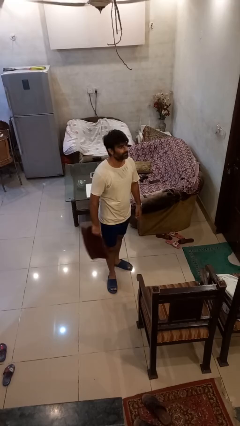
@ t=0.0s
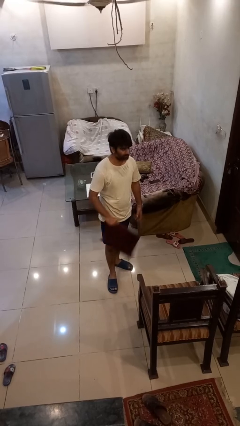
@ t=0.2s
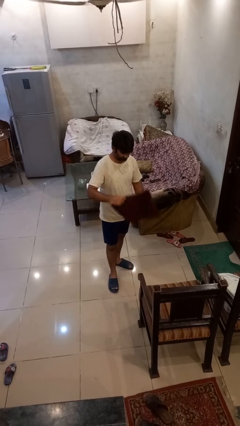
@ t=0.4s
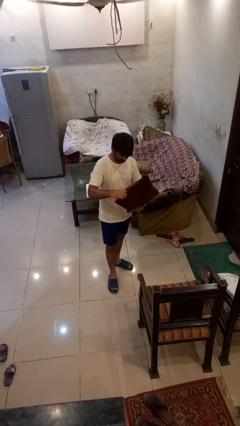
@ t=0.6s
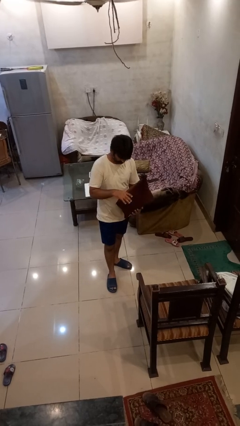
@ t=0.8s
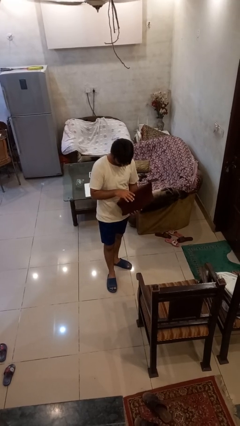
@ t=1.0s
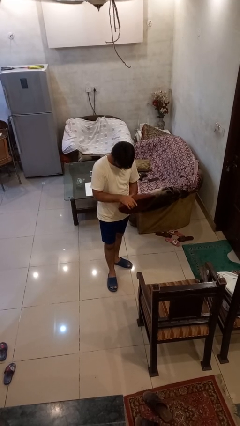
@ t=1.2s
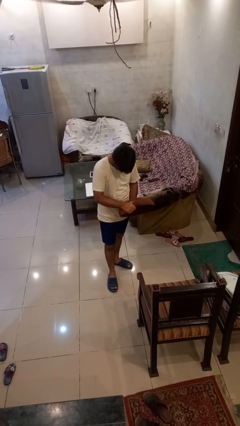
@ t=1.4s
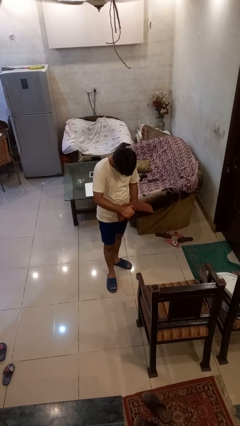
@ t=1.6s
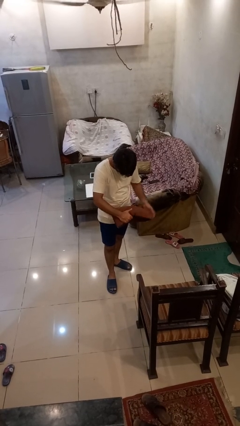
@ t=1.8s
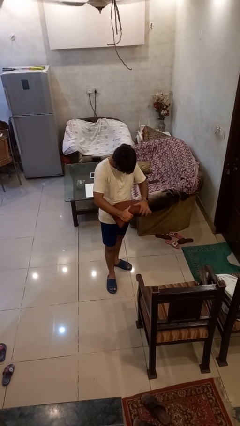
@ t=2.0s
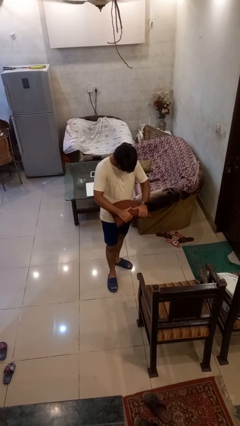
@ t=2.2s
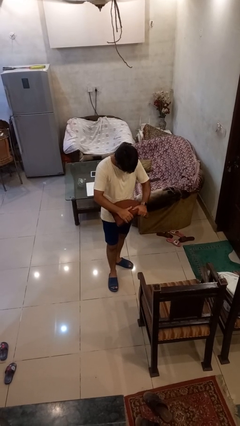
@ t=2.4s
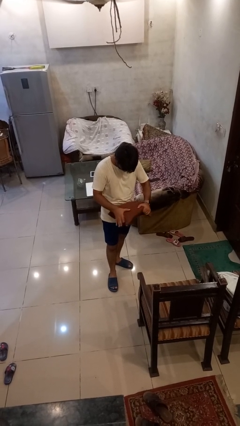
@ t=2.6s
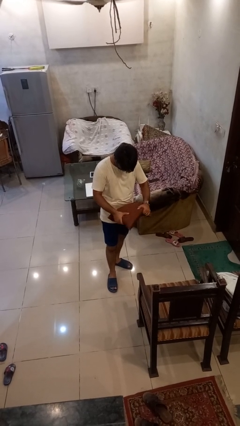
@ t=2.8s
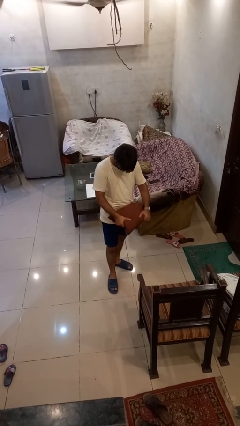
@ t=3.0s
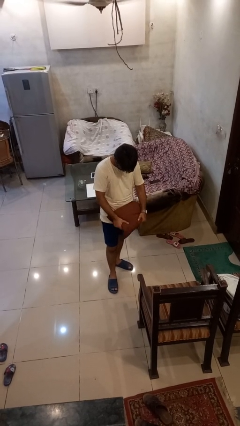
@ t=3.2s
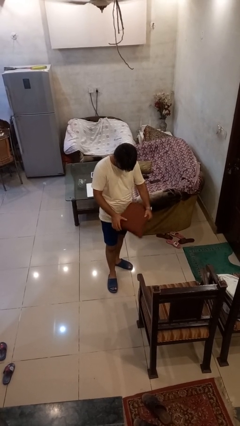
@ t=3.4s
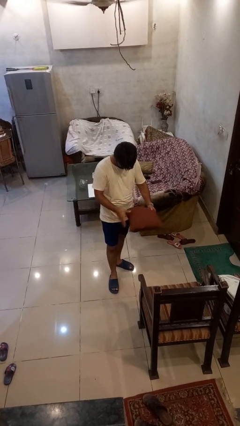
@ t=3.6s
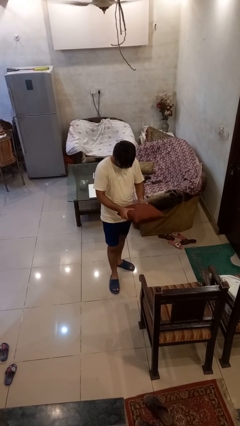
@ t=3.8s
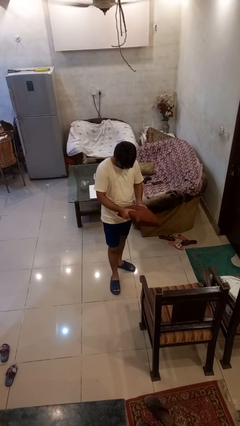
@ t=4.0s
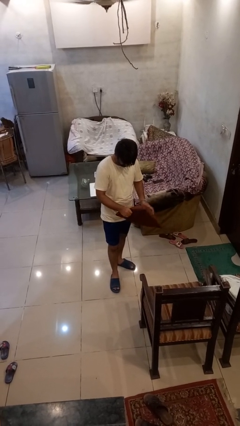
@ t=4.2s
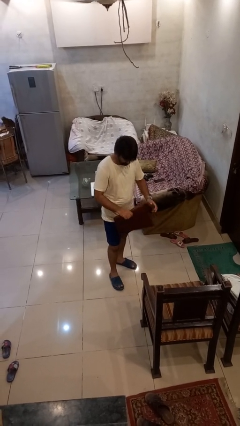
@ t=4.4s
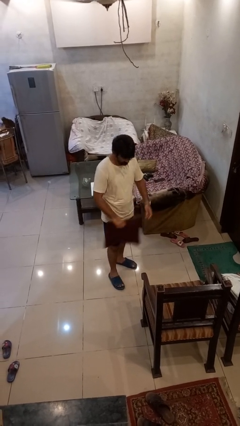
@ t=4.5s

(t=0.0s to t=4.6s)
person squeezes object

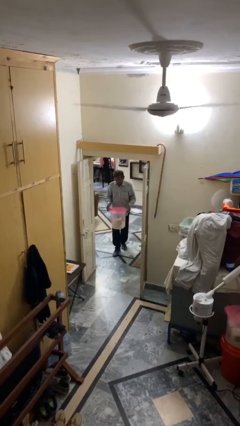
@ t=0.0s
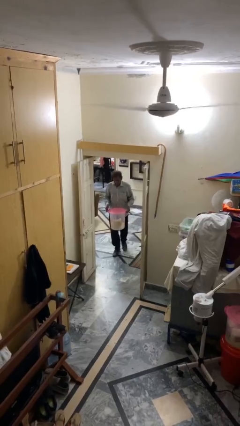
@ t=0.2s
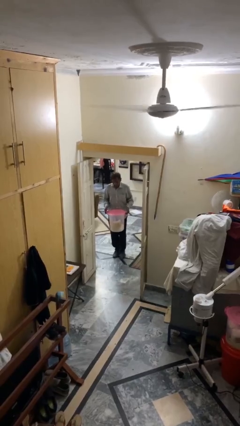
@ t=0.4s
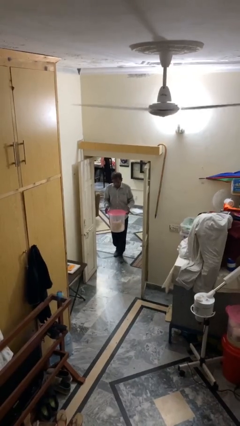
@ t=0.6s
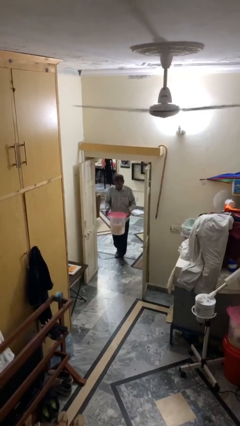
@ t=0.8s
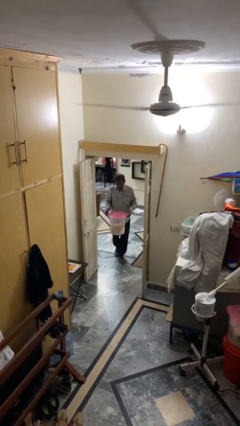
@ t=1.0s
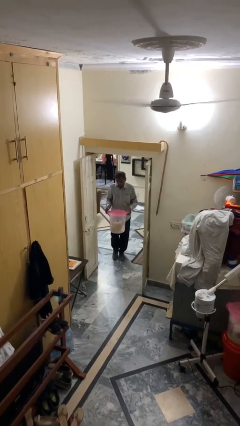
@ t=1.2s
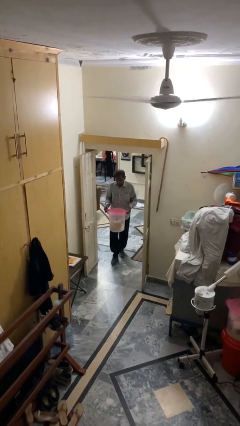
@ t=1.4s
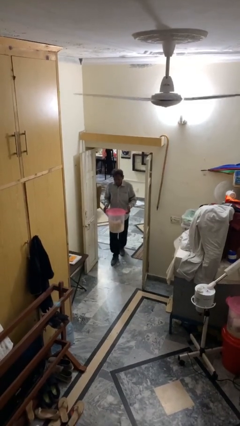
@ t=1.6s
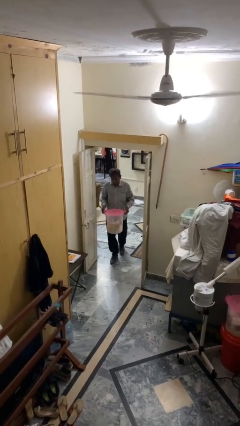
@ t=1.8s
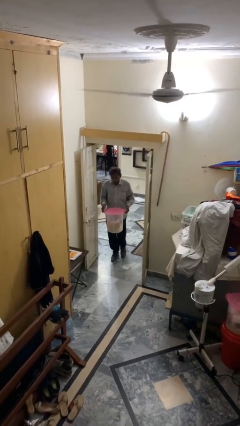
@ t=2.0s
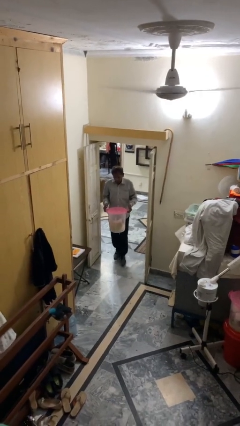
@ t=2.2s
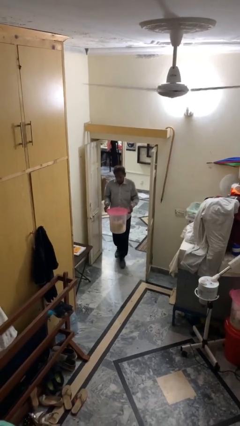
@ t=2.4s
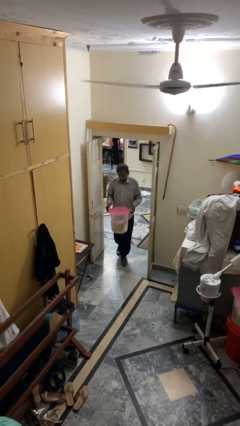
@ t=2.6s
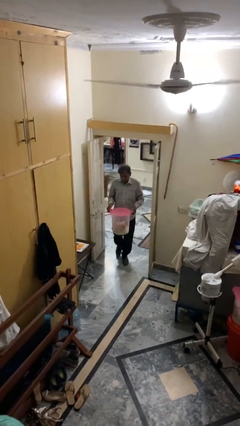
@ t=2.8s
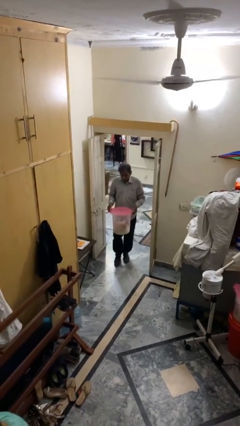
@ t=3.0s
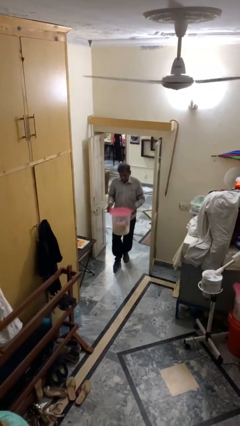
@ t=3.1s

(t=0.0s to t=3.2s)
person carries heavy object

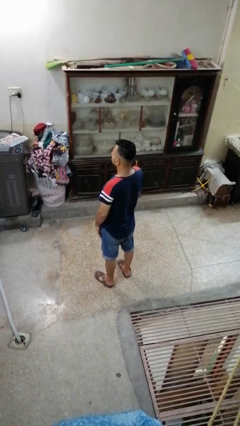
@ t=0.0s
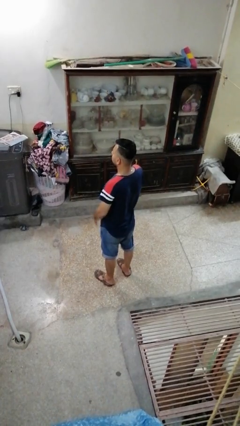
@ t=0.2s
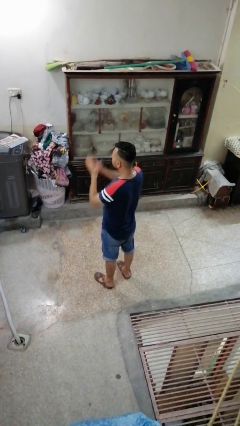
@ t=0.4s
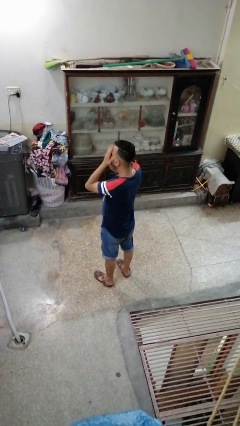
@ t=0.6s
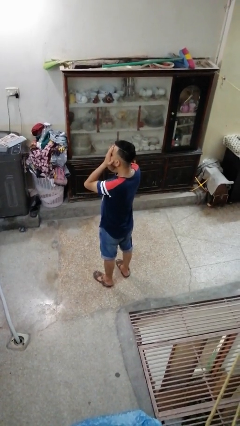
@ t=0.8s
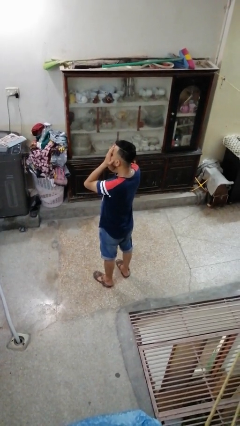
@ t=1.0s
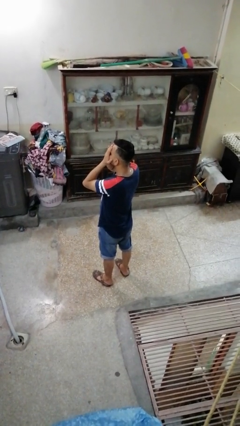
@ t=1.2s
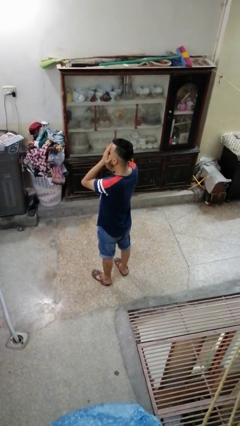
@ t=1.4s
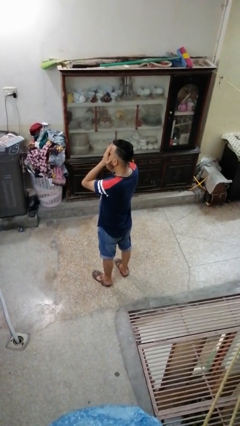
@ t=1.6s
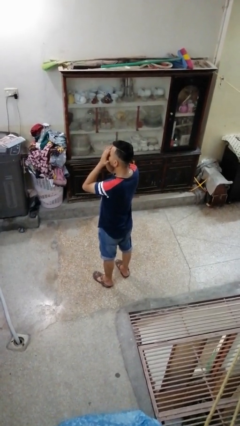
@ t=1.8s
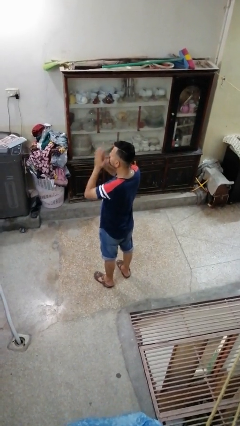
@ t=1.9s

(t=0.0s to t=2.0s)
person covers face with hands

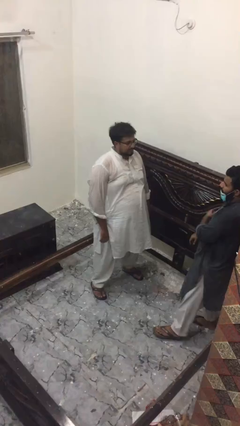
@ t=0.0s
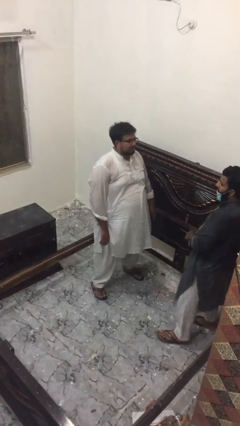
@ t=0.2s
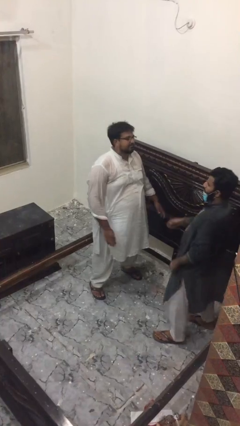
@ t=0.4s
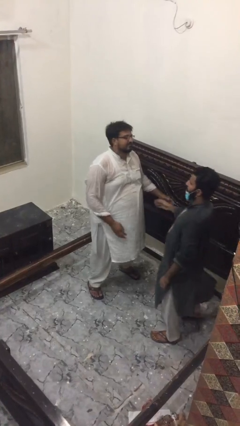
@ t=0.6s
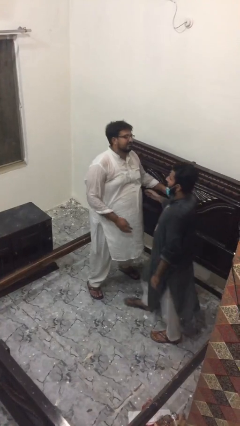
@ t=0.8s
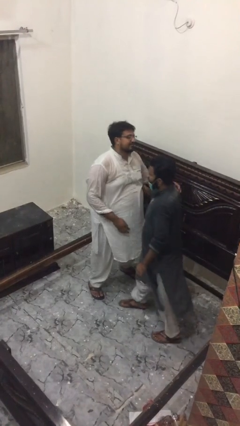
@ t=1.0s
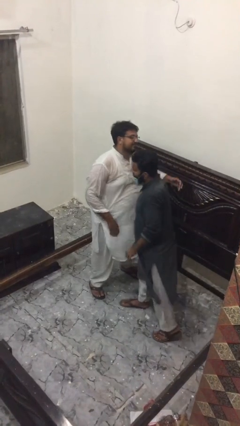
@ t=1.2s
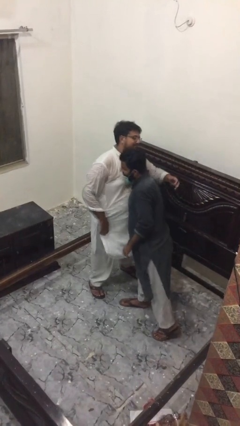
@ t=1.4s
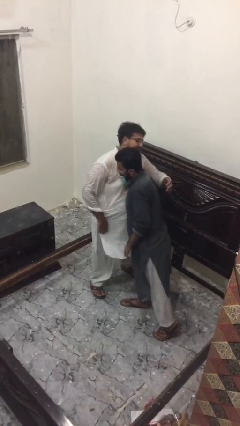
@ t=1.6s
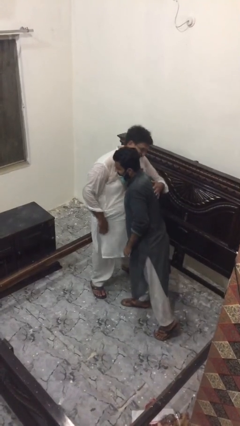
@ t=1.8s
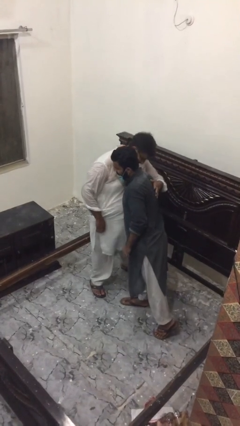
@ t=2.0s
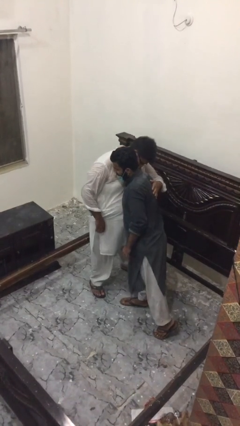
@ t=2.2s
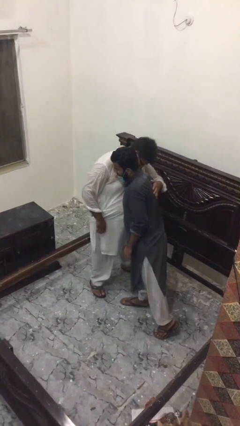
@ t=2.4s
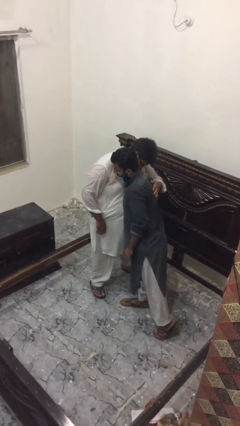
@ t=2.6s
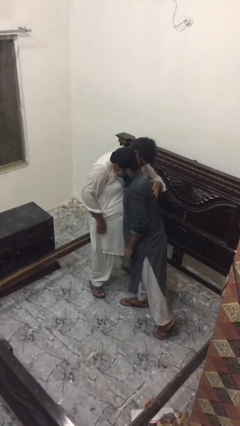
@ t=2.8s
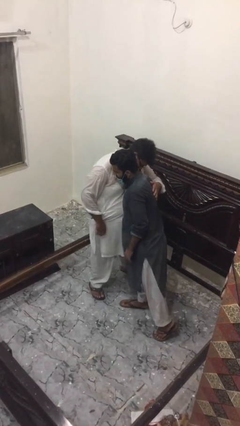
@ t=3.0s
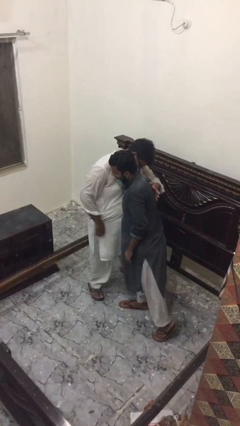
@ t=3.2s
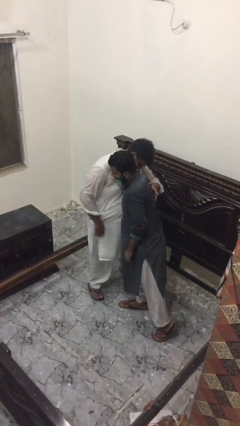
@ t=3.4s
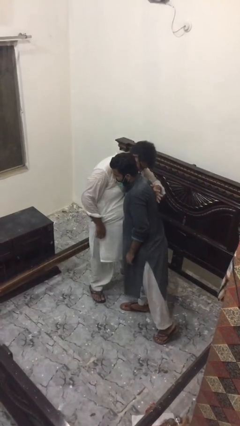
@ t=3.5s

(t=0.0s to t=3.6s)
person embraces person

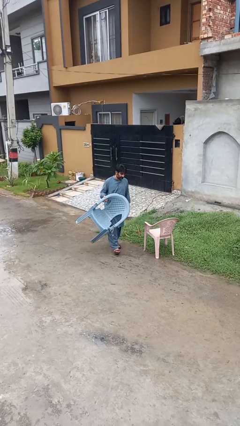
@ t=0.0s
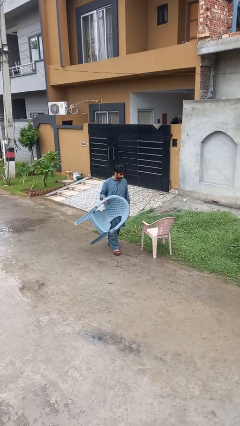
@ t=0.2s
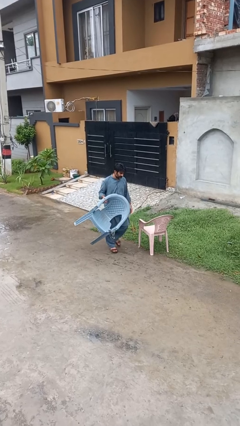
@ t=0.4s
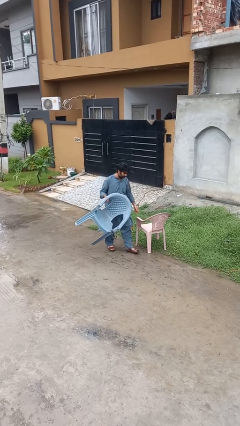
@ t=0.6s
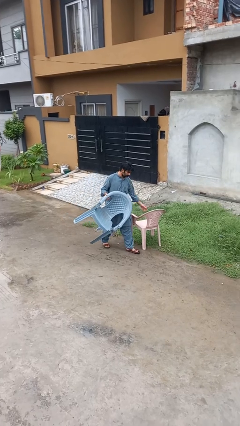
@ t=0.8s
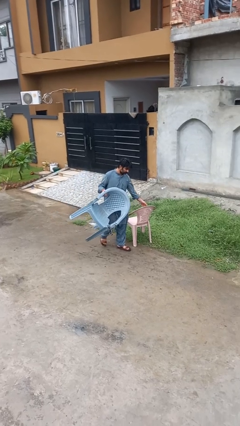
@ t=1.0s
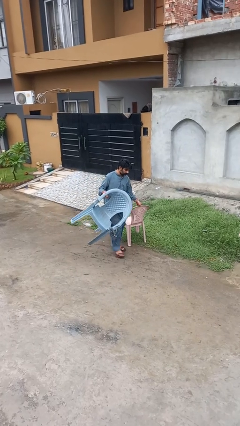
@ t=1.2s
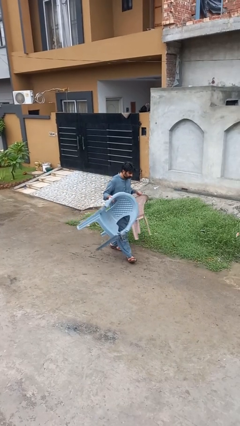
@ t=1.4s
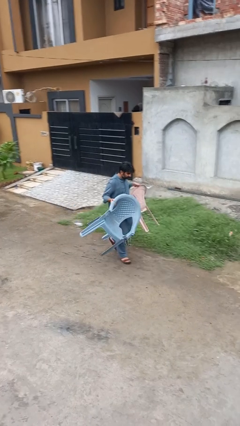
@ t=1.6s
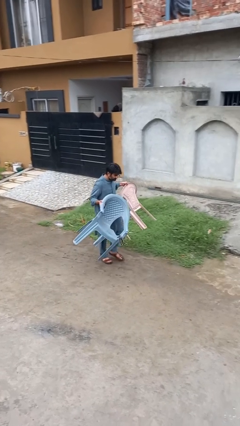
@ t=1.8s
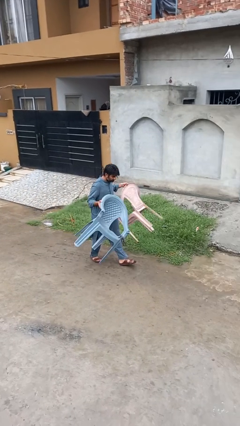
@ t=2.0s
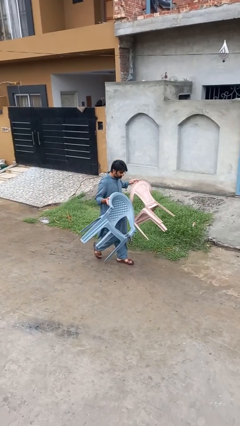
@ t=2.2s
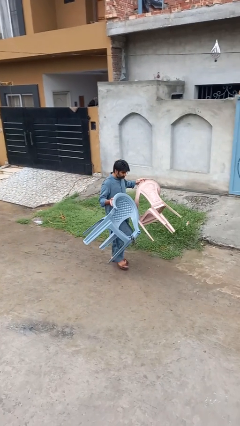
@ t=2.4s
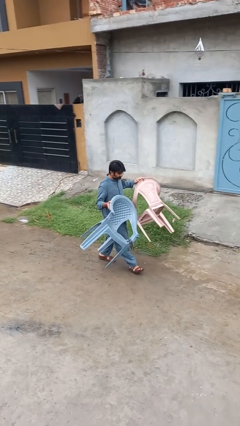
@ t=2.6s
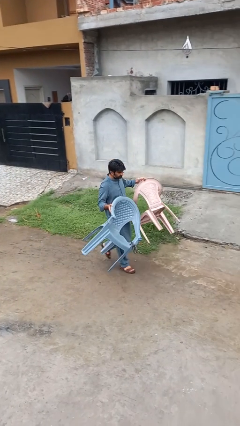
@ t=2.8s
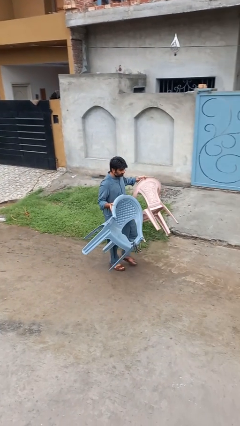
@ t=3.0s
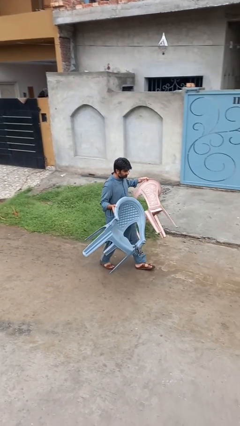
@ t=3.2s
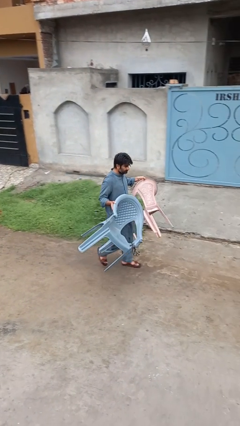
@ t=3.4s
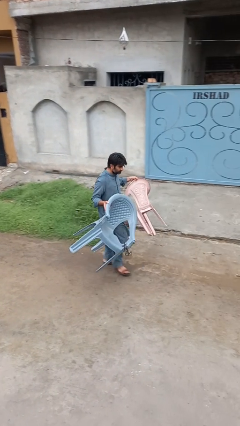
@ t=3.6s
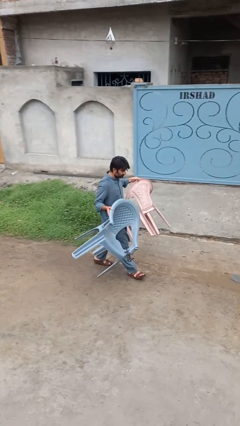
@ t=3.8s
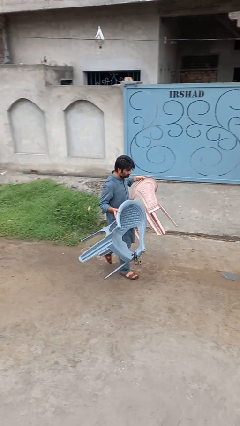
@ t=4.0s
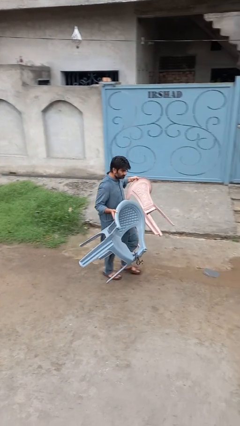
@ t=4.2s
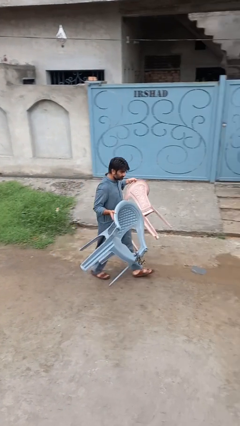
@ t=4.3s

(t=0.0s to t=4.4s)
person carries furniture
